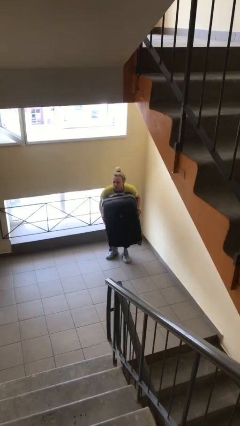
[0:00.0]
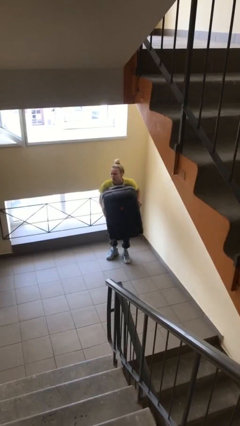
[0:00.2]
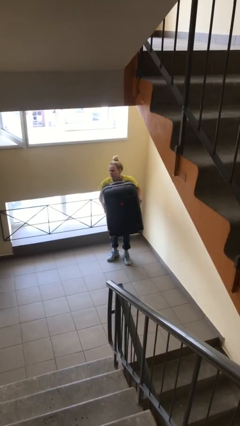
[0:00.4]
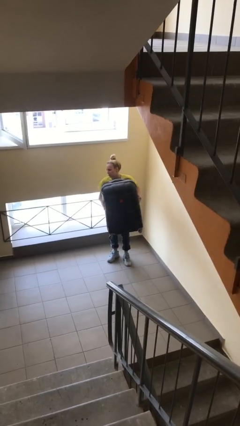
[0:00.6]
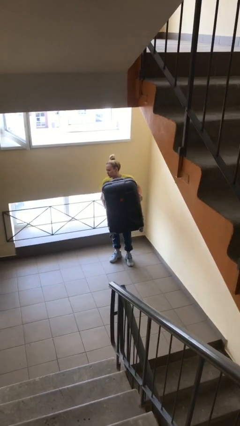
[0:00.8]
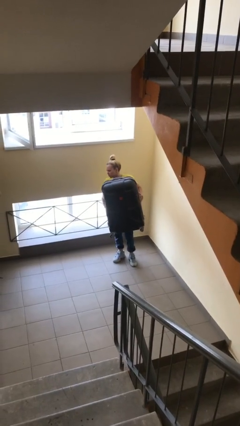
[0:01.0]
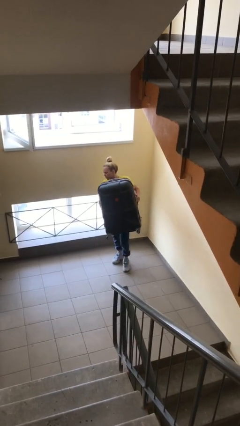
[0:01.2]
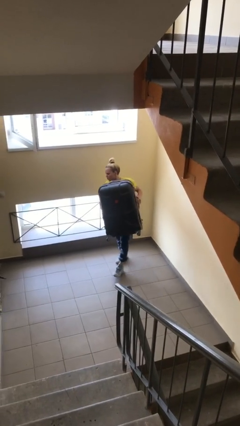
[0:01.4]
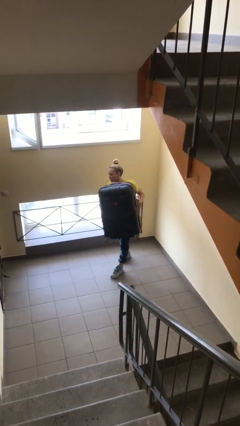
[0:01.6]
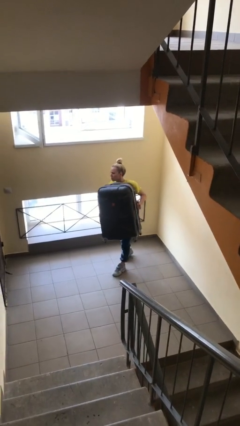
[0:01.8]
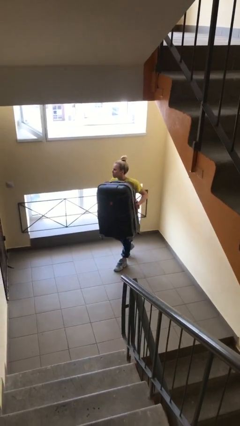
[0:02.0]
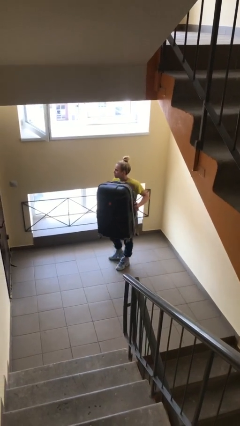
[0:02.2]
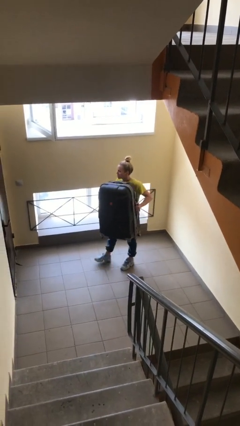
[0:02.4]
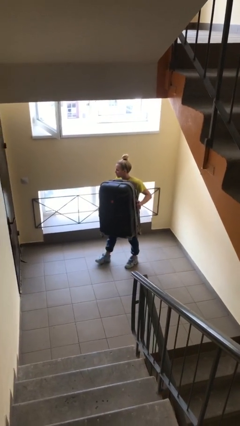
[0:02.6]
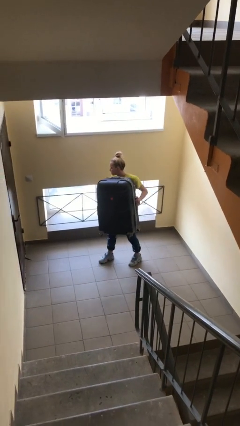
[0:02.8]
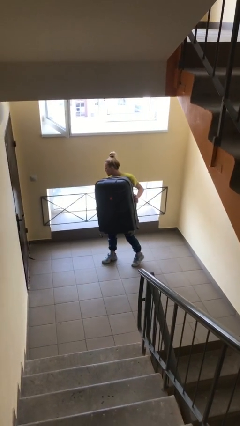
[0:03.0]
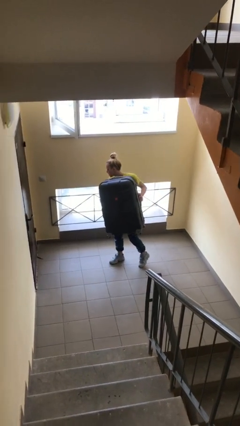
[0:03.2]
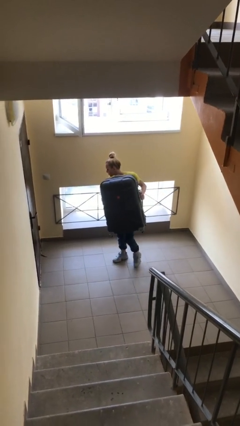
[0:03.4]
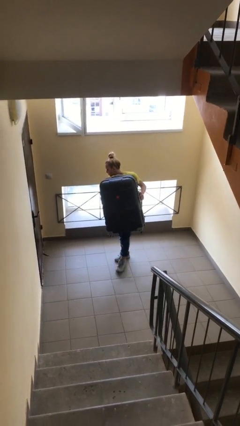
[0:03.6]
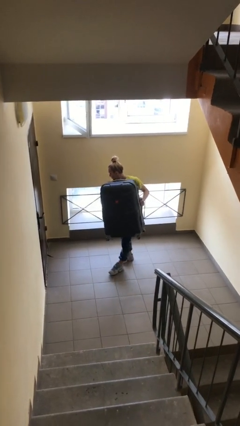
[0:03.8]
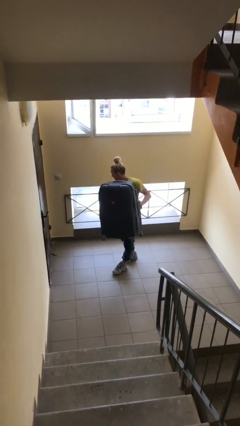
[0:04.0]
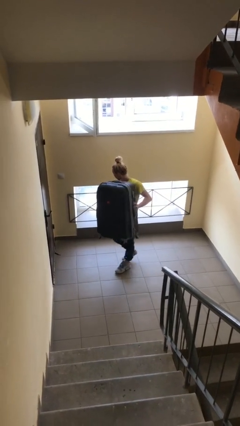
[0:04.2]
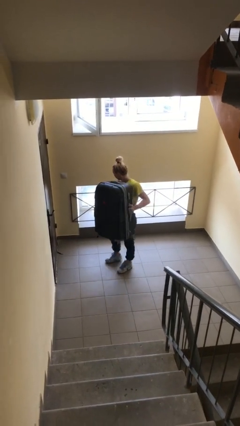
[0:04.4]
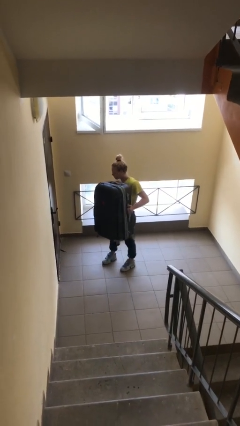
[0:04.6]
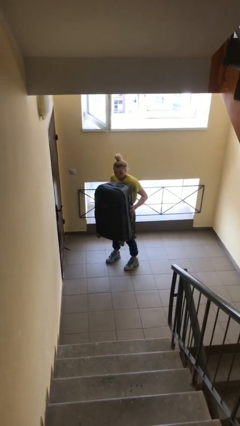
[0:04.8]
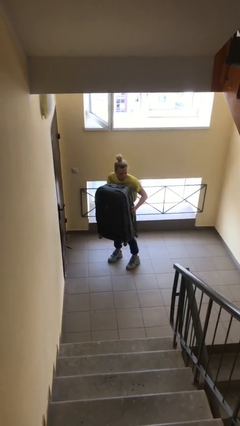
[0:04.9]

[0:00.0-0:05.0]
person carries heavy object

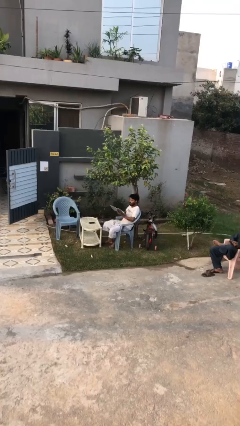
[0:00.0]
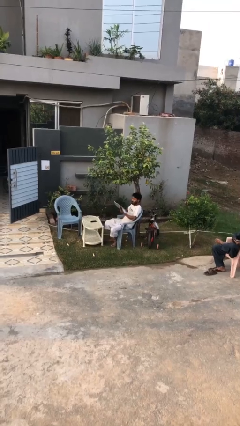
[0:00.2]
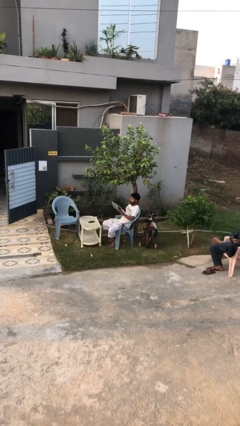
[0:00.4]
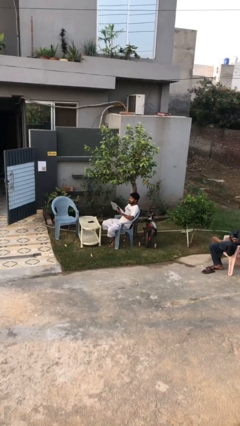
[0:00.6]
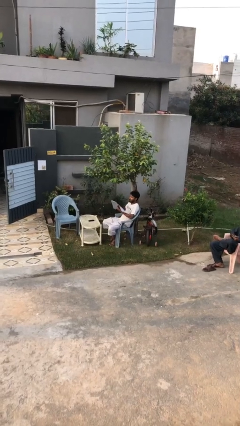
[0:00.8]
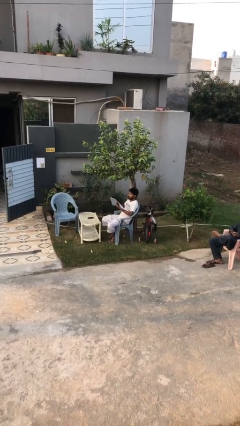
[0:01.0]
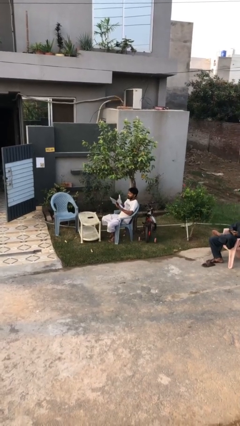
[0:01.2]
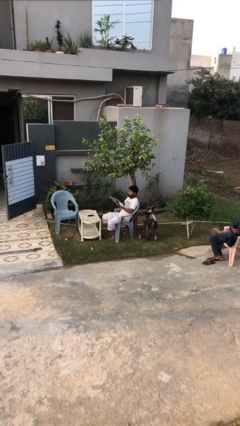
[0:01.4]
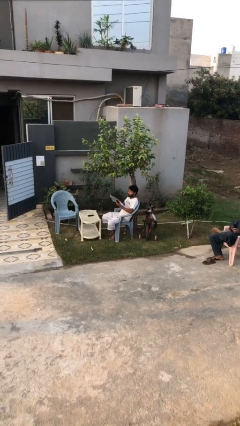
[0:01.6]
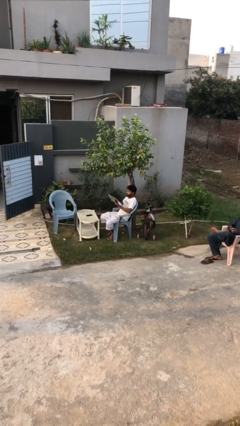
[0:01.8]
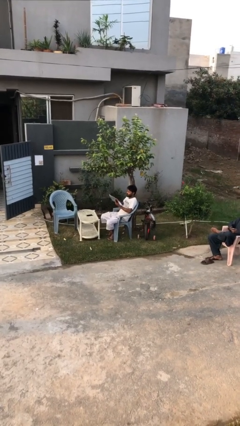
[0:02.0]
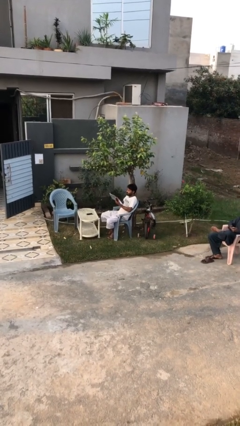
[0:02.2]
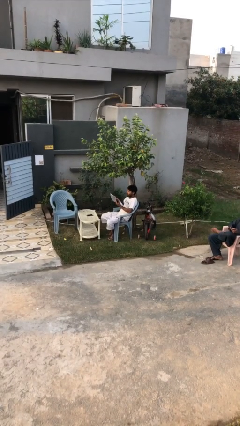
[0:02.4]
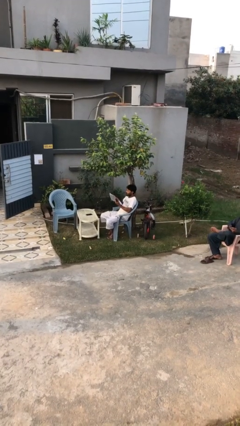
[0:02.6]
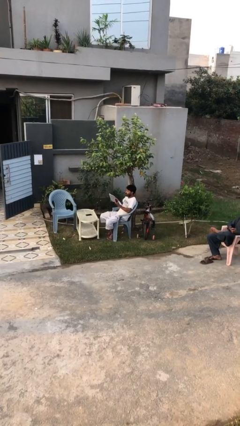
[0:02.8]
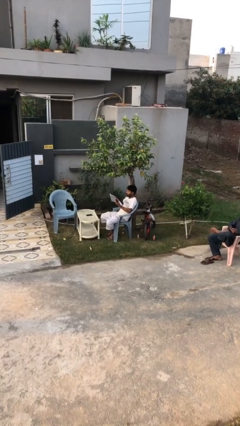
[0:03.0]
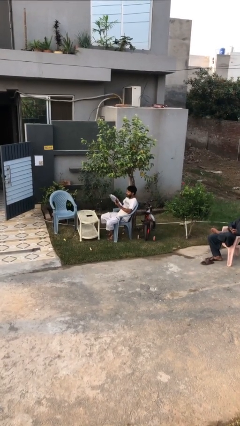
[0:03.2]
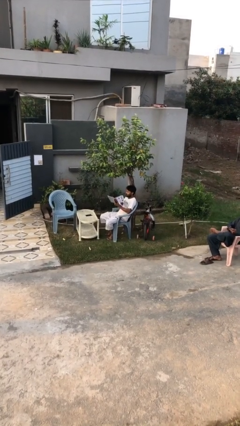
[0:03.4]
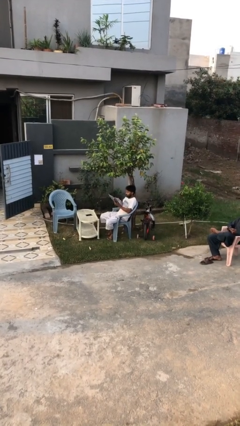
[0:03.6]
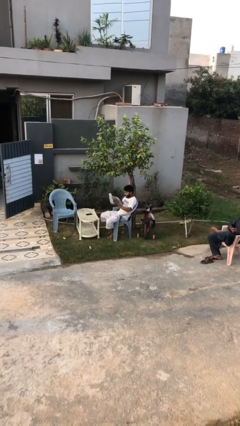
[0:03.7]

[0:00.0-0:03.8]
person reads document

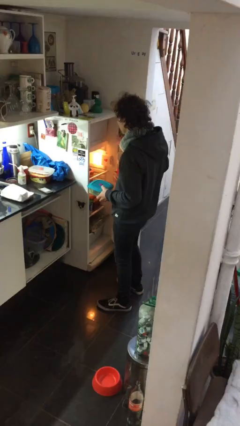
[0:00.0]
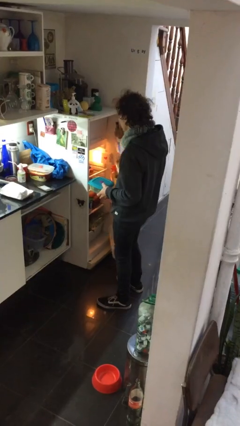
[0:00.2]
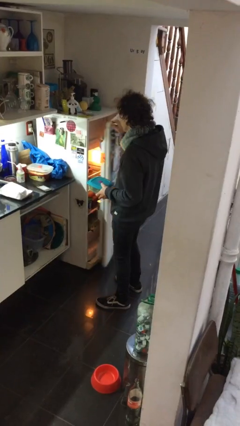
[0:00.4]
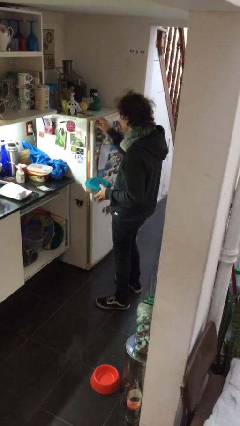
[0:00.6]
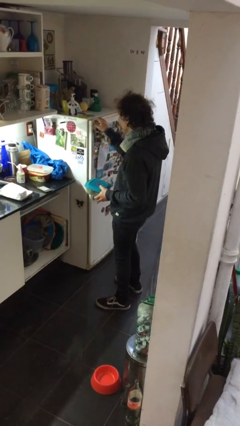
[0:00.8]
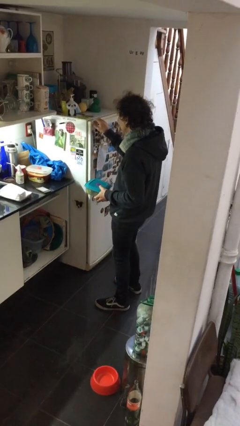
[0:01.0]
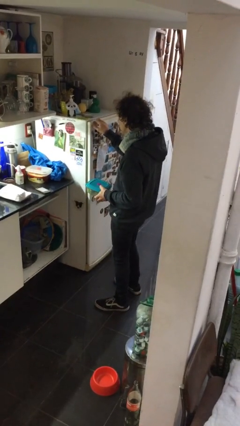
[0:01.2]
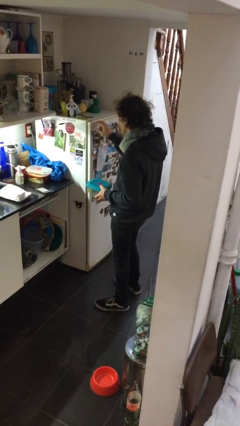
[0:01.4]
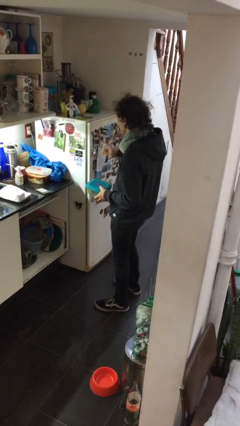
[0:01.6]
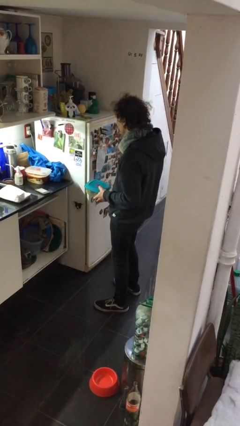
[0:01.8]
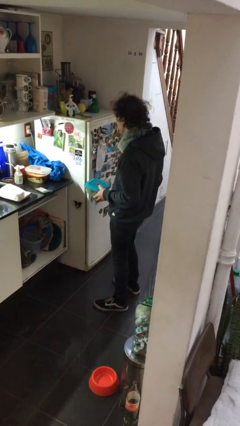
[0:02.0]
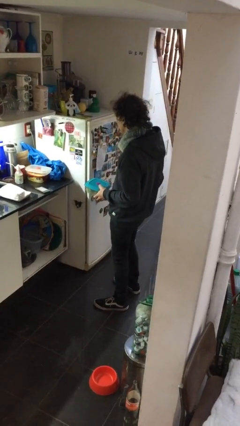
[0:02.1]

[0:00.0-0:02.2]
person closes refrigerator

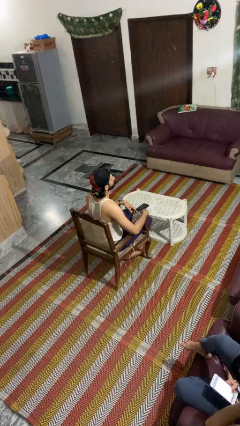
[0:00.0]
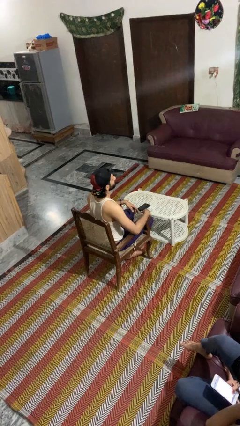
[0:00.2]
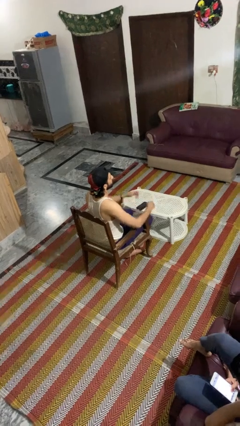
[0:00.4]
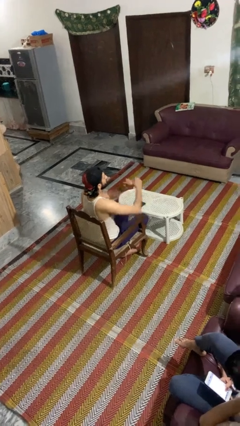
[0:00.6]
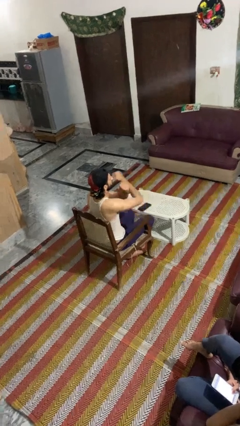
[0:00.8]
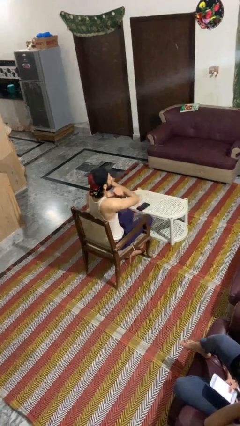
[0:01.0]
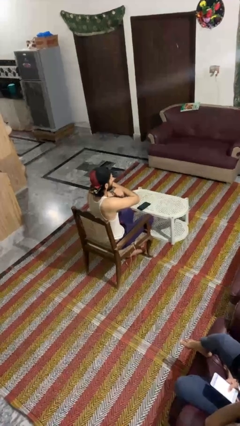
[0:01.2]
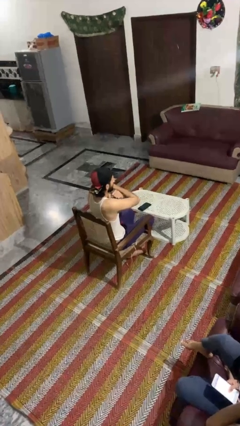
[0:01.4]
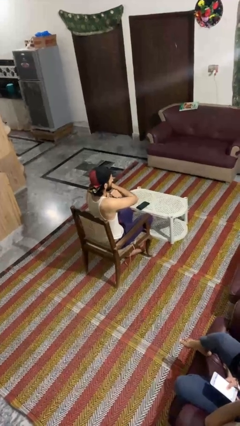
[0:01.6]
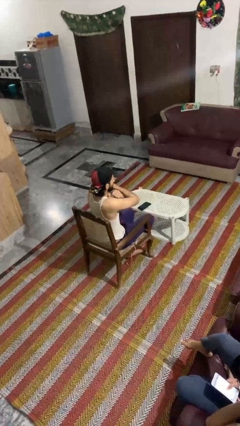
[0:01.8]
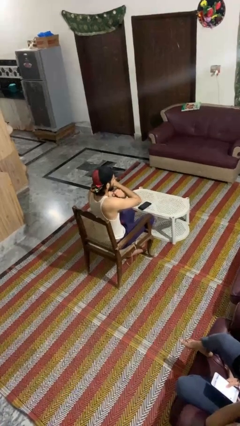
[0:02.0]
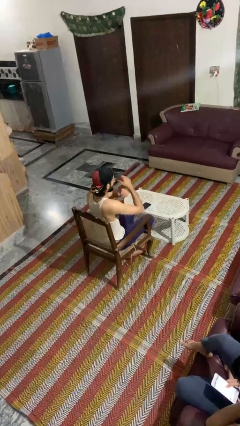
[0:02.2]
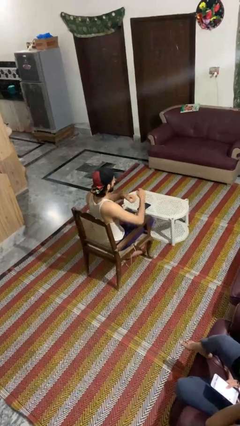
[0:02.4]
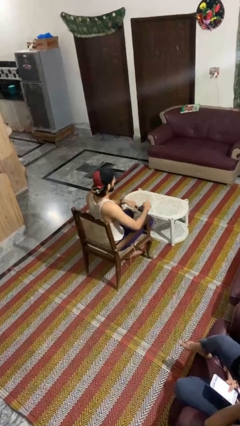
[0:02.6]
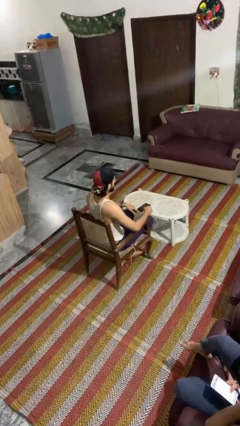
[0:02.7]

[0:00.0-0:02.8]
person gestures arms x

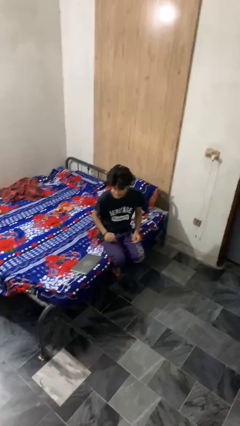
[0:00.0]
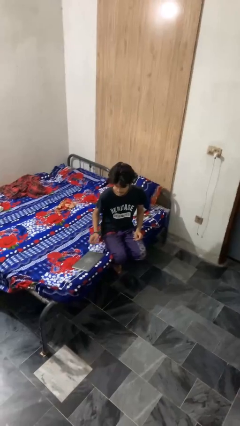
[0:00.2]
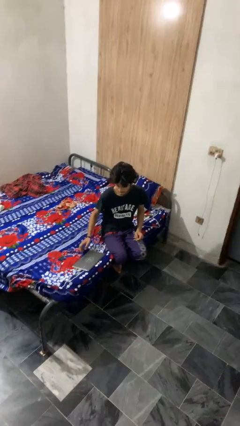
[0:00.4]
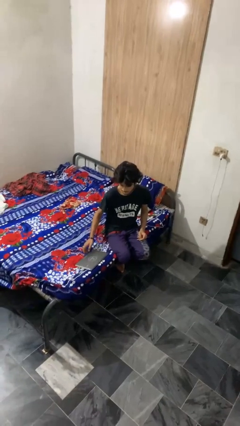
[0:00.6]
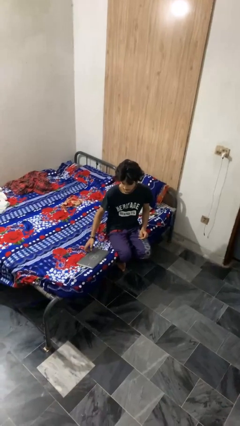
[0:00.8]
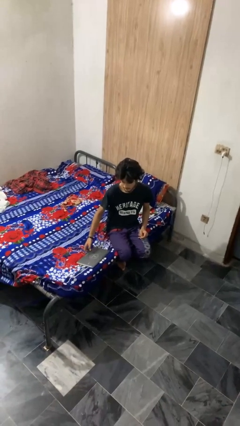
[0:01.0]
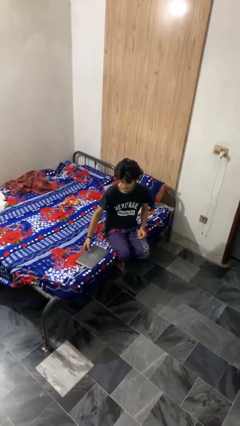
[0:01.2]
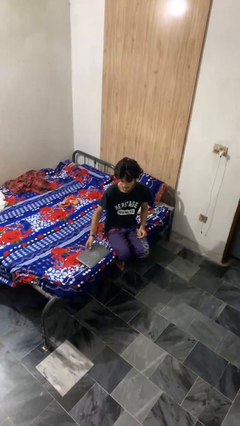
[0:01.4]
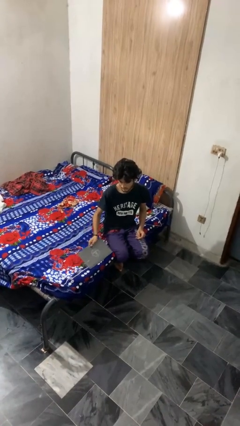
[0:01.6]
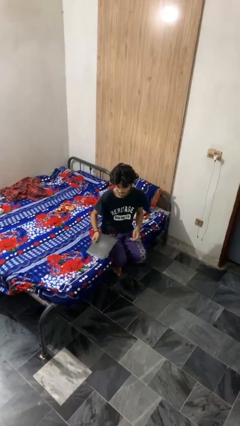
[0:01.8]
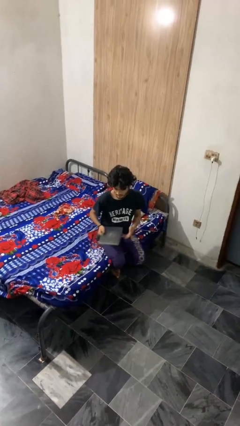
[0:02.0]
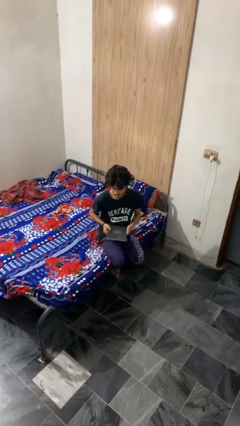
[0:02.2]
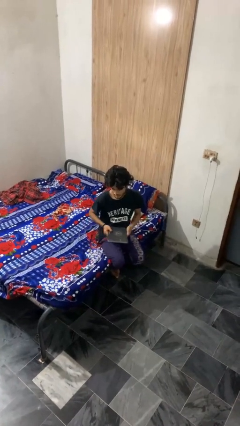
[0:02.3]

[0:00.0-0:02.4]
person picks up object from bed

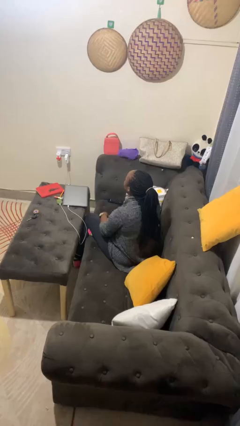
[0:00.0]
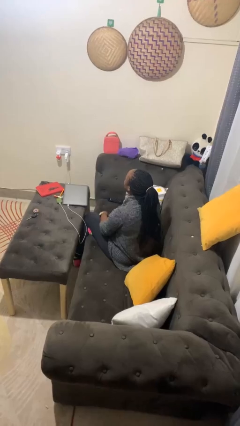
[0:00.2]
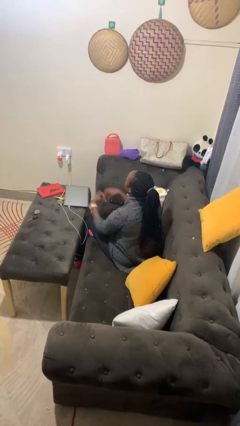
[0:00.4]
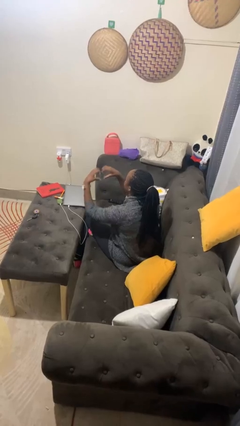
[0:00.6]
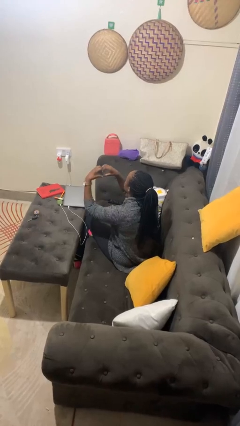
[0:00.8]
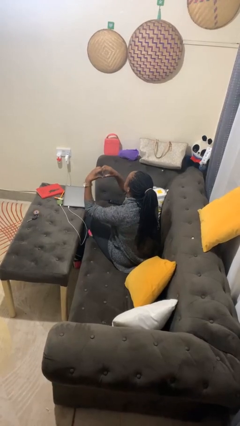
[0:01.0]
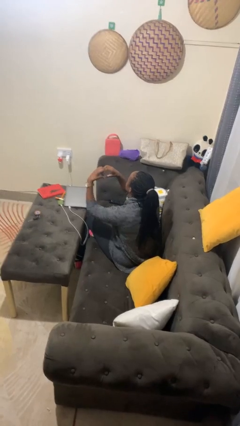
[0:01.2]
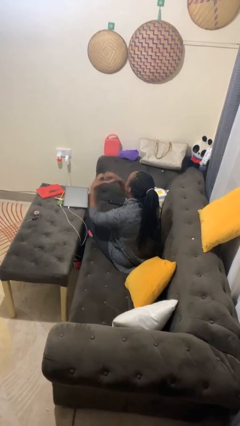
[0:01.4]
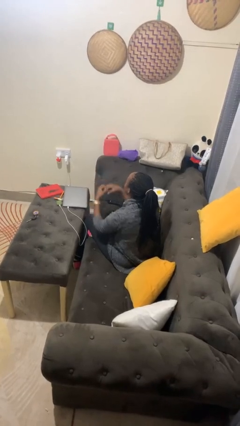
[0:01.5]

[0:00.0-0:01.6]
person gestures heart
